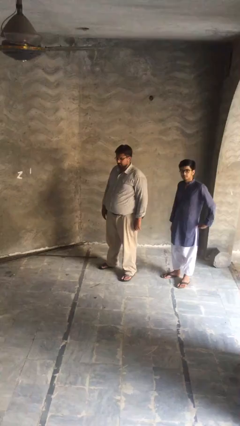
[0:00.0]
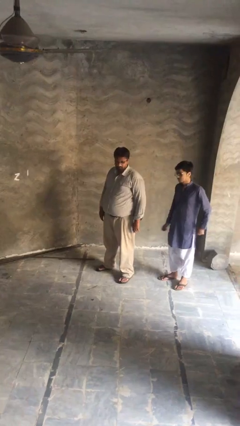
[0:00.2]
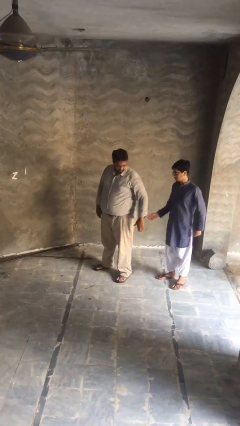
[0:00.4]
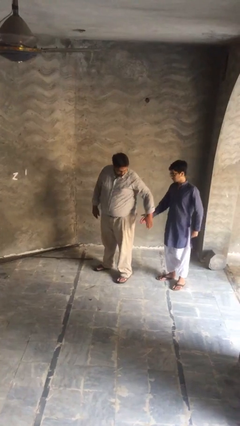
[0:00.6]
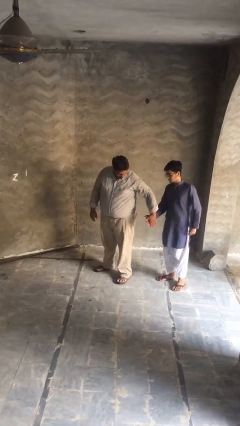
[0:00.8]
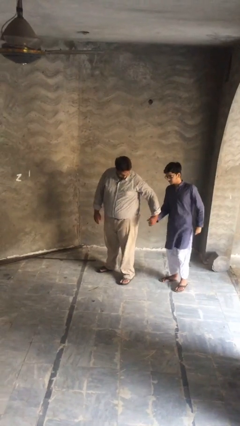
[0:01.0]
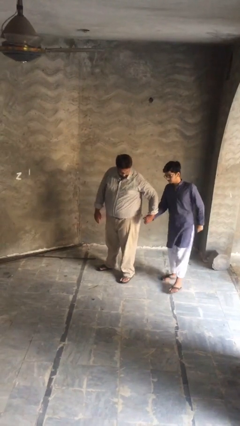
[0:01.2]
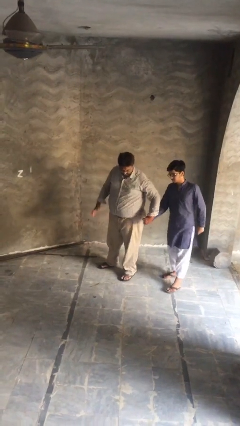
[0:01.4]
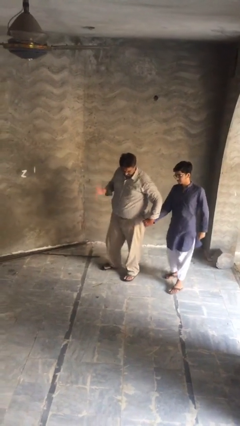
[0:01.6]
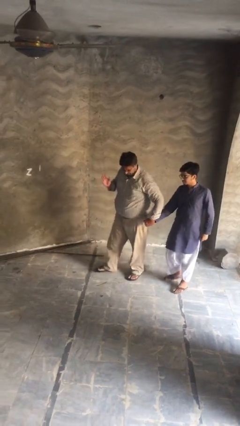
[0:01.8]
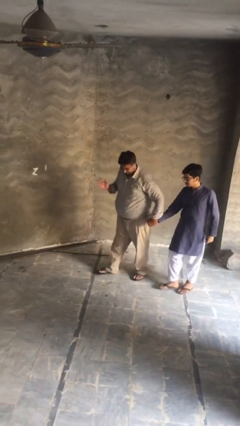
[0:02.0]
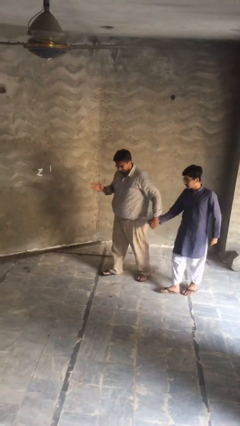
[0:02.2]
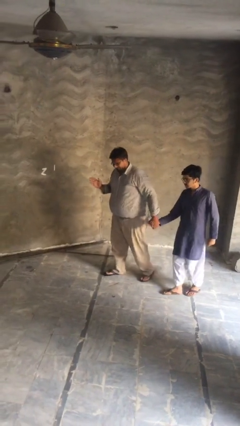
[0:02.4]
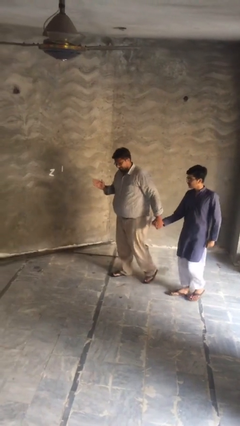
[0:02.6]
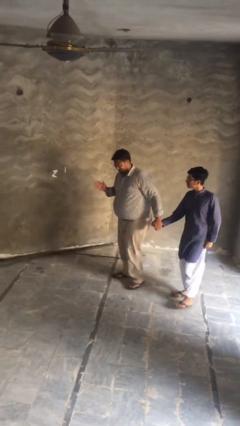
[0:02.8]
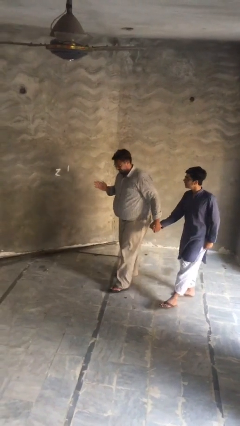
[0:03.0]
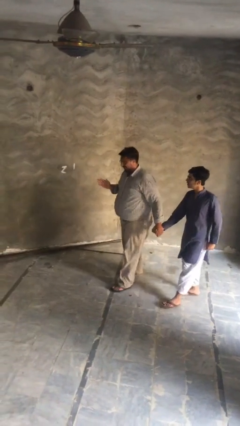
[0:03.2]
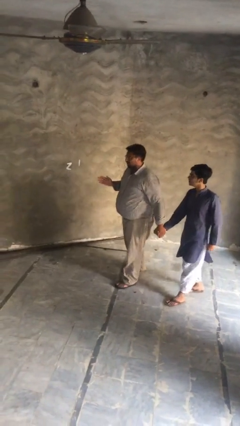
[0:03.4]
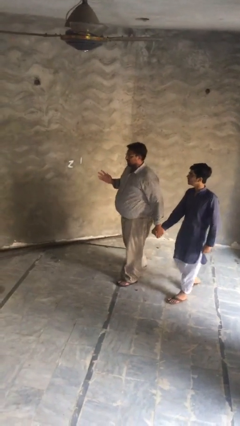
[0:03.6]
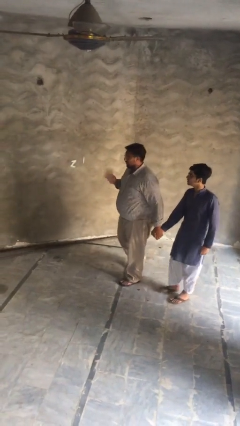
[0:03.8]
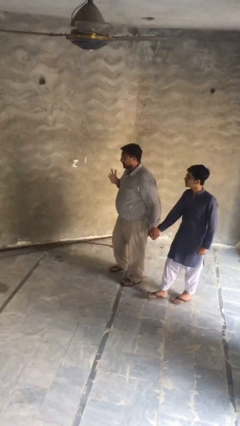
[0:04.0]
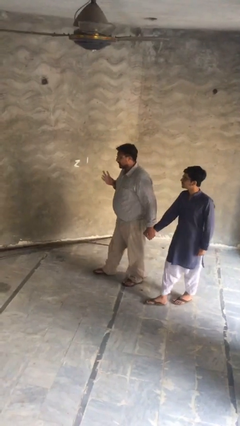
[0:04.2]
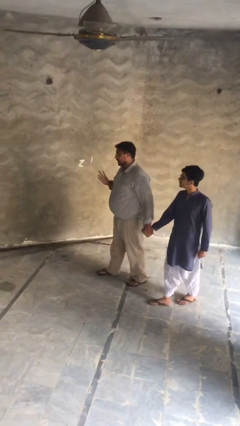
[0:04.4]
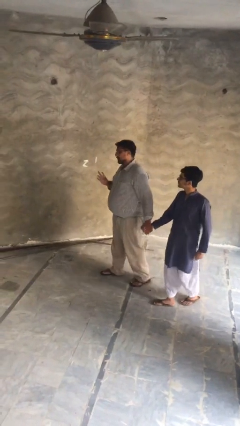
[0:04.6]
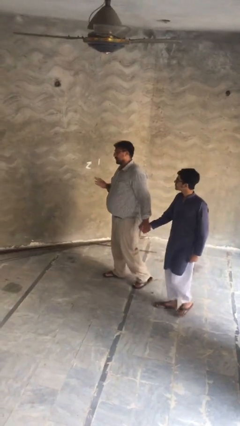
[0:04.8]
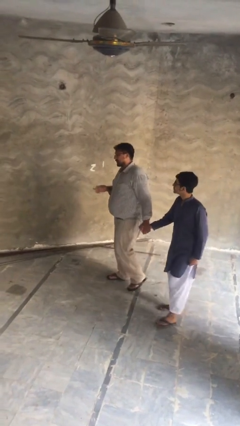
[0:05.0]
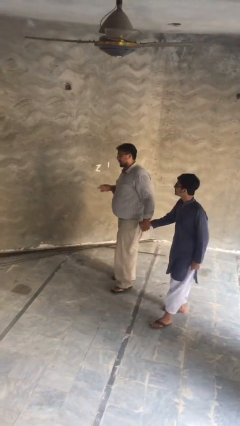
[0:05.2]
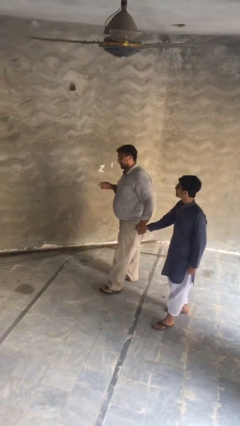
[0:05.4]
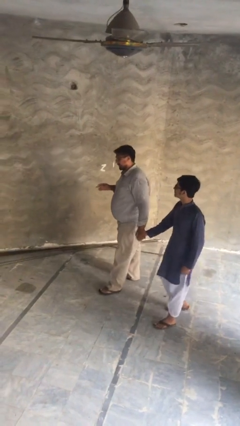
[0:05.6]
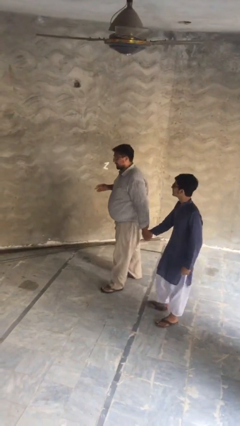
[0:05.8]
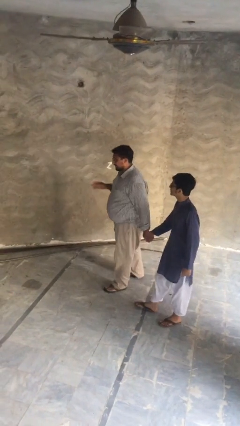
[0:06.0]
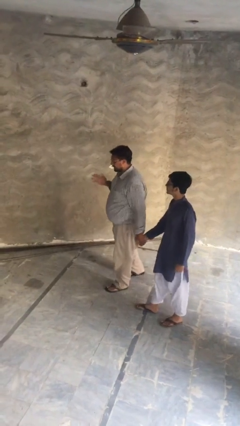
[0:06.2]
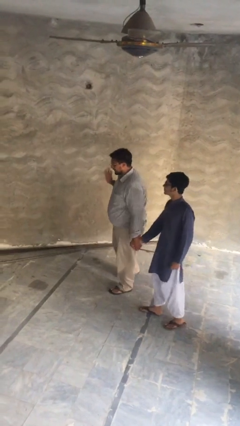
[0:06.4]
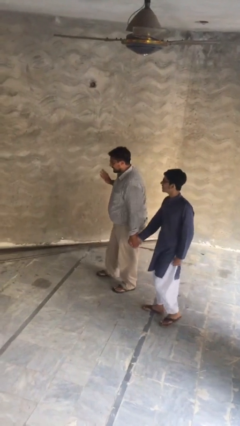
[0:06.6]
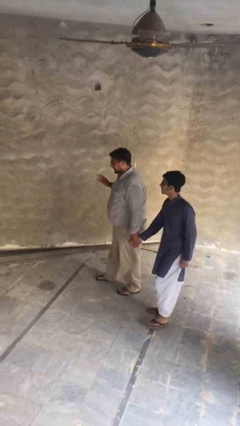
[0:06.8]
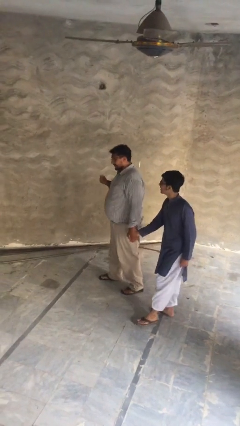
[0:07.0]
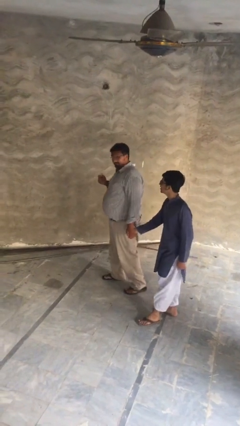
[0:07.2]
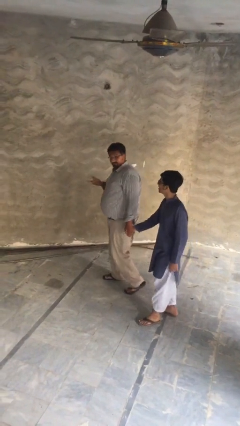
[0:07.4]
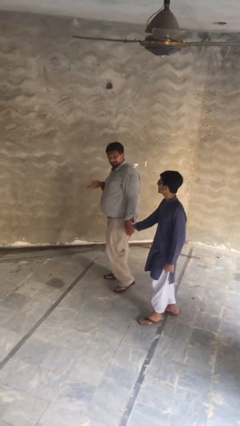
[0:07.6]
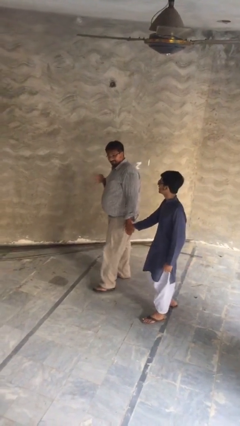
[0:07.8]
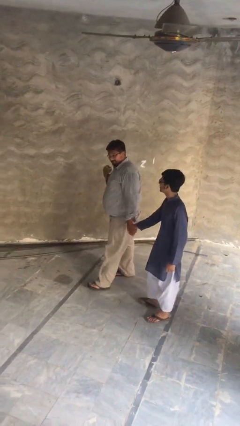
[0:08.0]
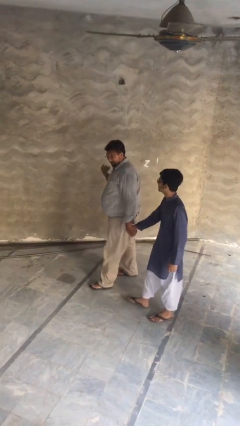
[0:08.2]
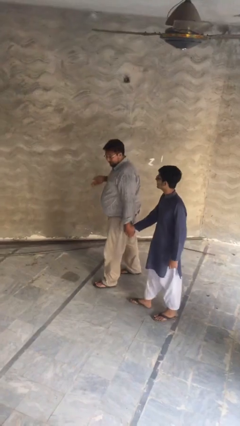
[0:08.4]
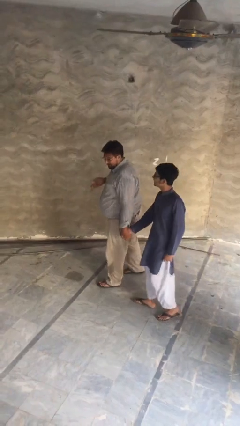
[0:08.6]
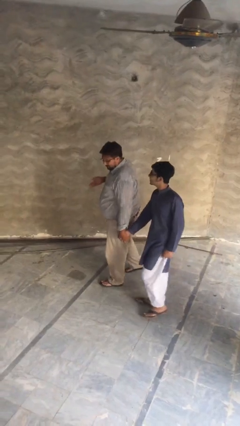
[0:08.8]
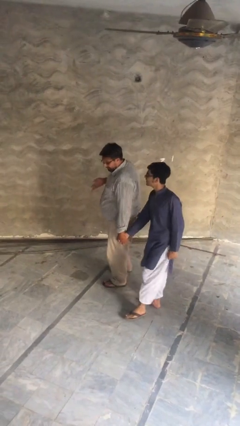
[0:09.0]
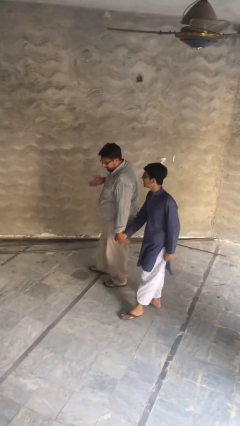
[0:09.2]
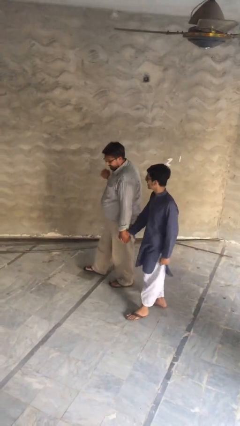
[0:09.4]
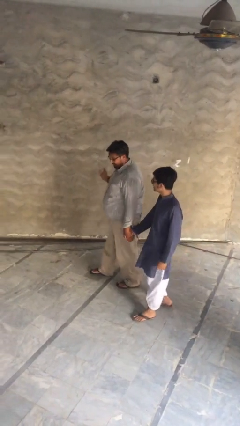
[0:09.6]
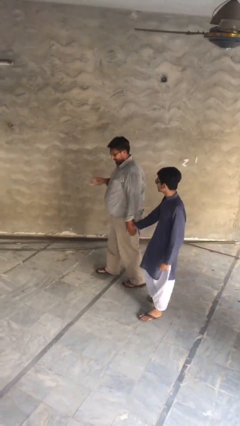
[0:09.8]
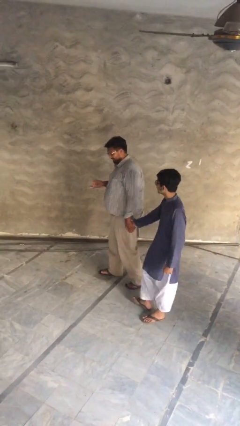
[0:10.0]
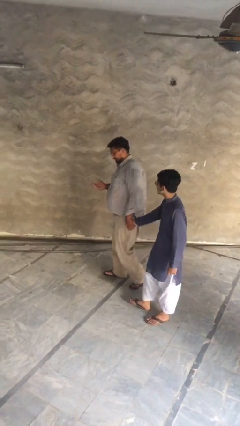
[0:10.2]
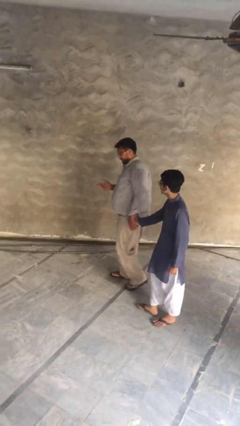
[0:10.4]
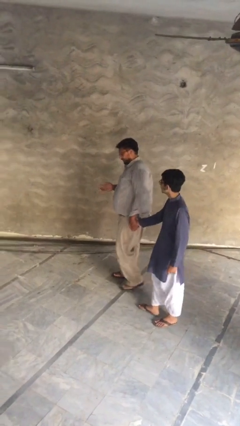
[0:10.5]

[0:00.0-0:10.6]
person holds hand

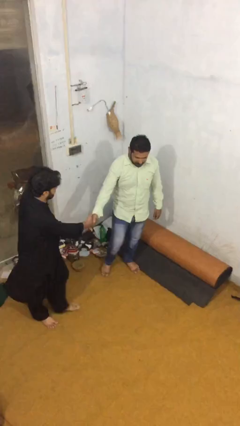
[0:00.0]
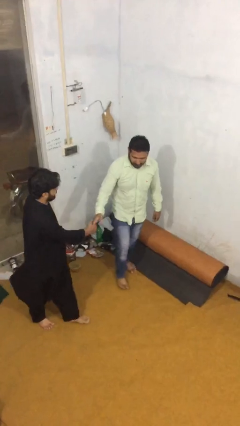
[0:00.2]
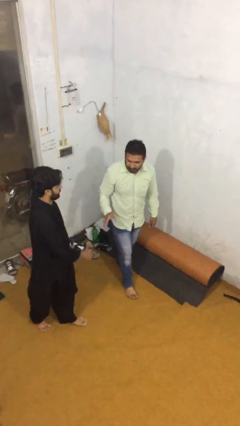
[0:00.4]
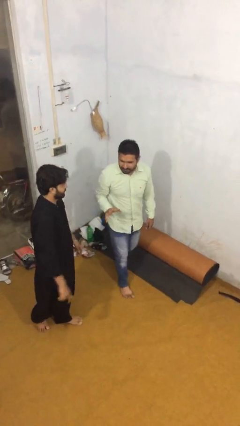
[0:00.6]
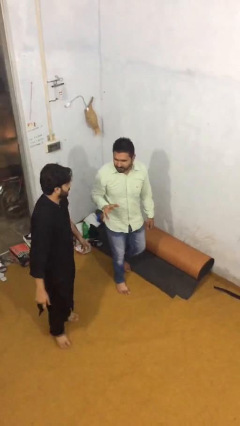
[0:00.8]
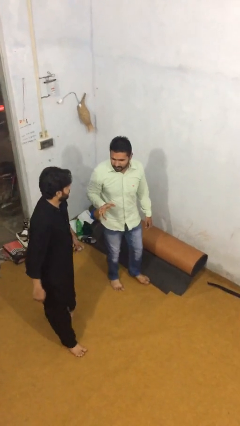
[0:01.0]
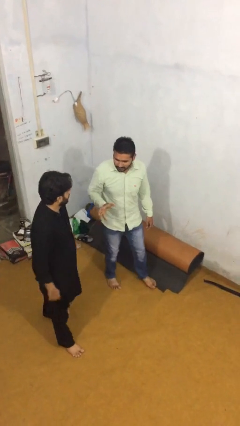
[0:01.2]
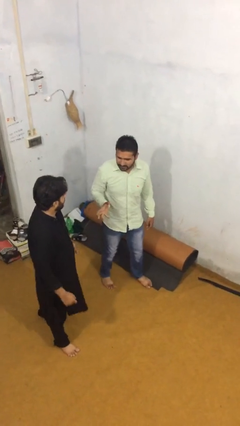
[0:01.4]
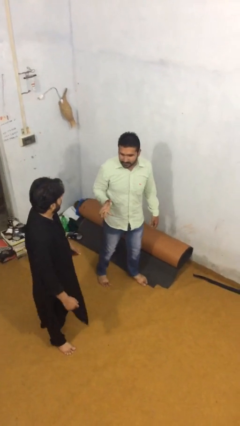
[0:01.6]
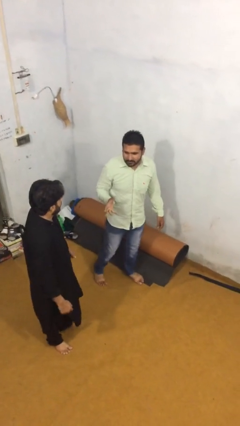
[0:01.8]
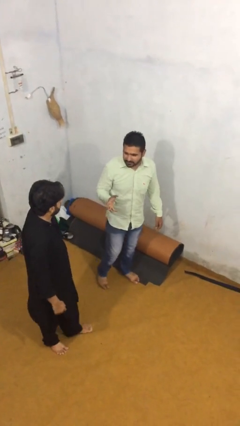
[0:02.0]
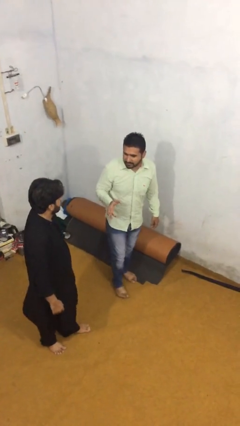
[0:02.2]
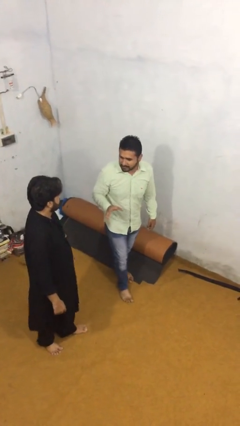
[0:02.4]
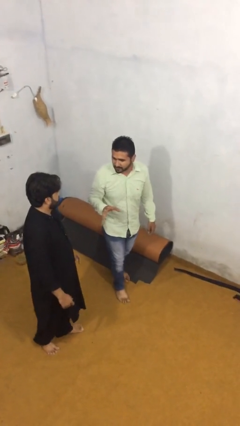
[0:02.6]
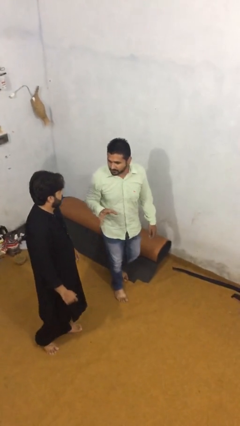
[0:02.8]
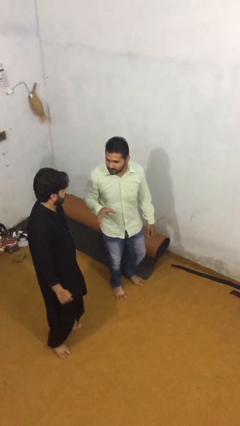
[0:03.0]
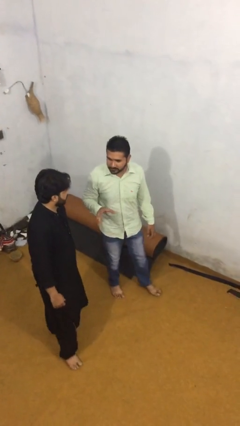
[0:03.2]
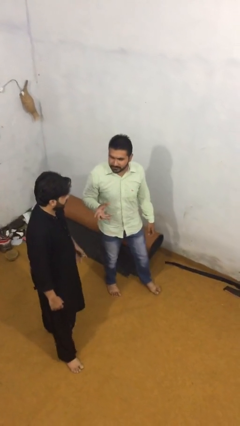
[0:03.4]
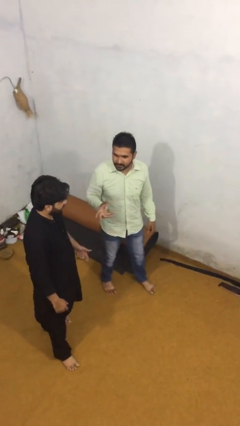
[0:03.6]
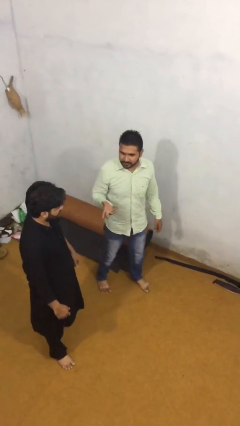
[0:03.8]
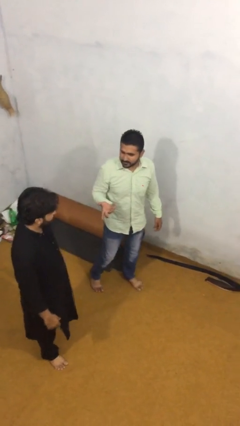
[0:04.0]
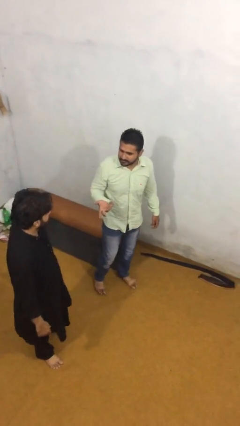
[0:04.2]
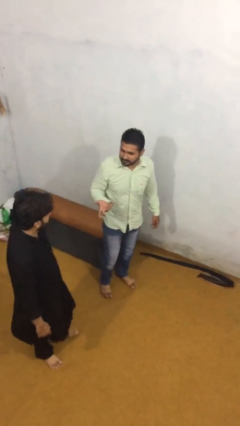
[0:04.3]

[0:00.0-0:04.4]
person talks to person

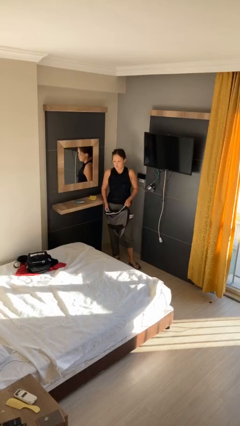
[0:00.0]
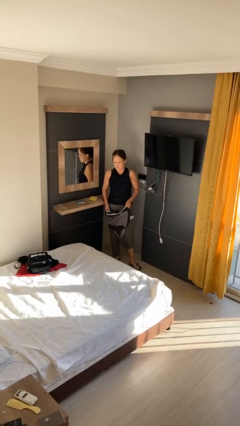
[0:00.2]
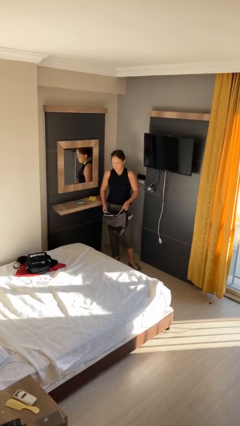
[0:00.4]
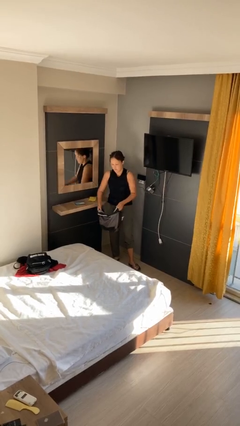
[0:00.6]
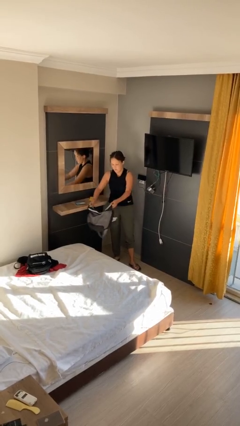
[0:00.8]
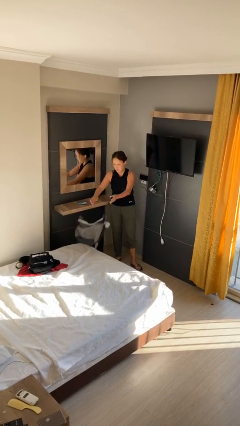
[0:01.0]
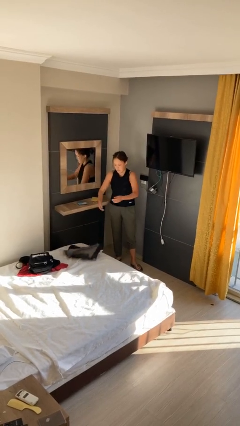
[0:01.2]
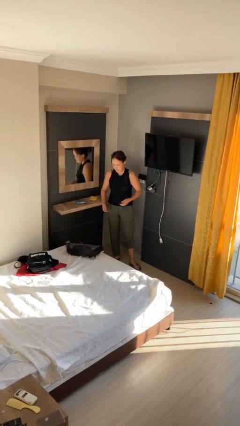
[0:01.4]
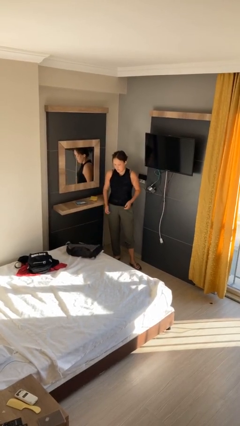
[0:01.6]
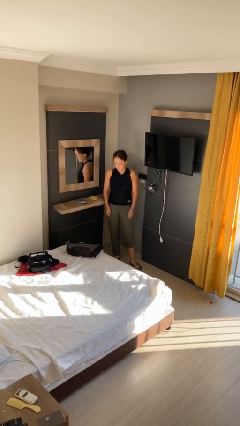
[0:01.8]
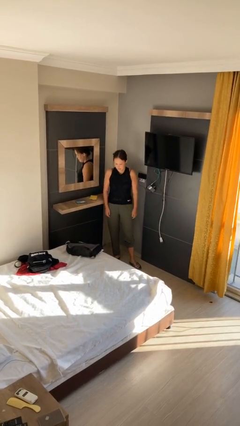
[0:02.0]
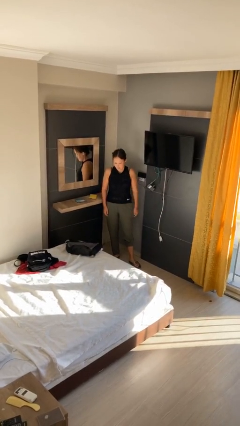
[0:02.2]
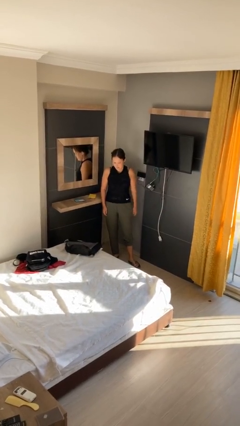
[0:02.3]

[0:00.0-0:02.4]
person throws object on bed
